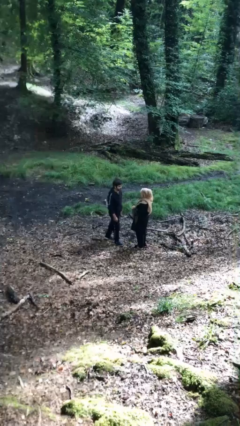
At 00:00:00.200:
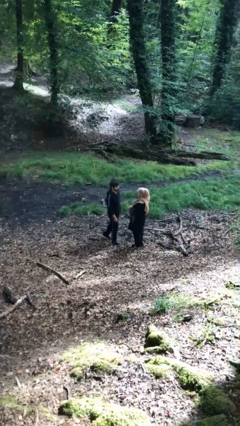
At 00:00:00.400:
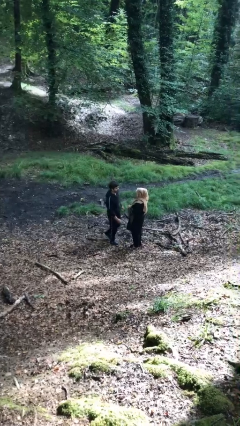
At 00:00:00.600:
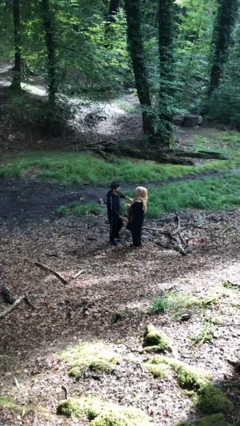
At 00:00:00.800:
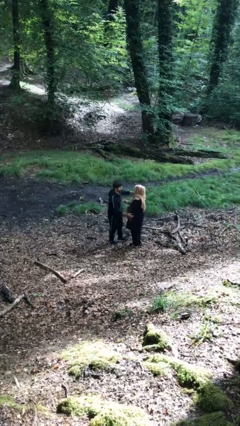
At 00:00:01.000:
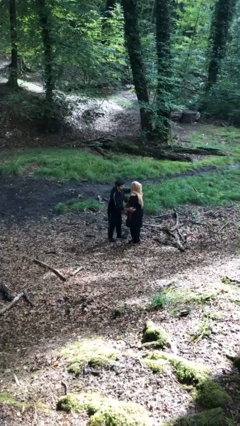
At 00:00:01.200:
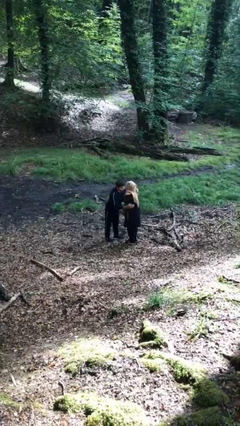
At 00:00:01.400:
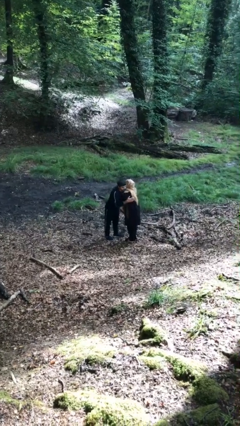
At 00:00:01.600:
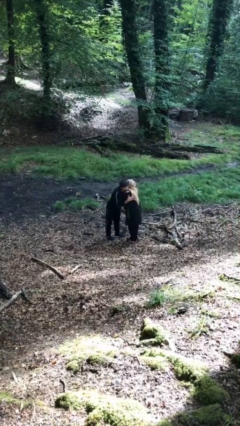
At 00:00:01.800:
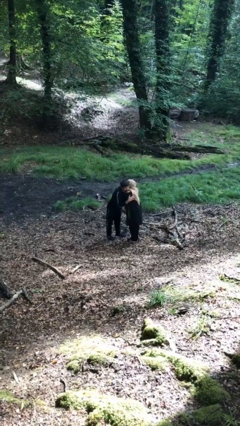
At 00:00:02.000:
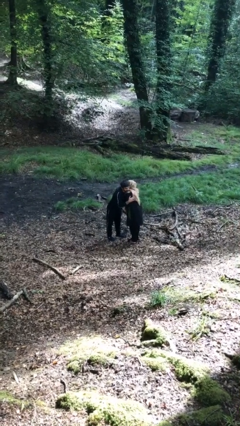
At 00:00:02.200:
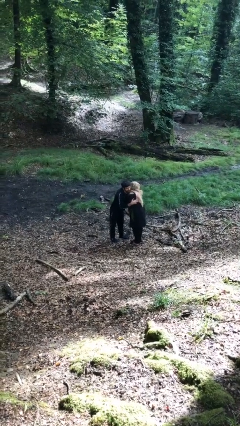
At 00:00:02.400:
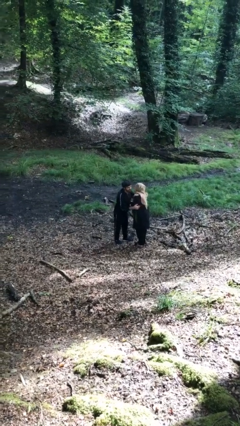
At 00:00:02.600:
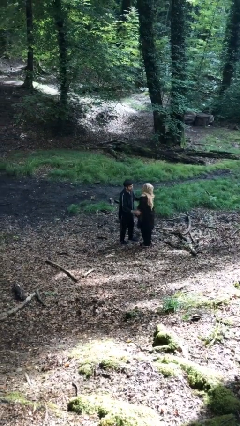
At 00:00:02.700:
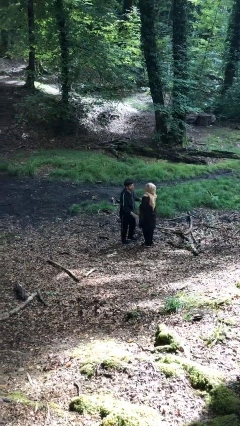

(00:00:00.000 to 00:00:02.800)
person embraces person

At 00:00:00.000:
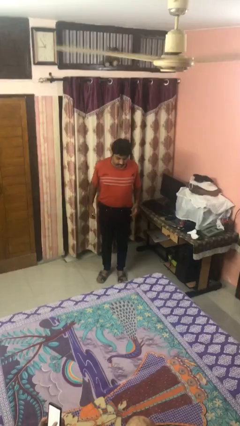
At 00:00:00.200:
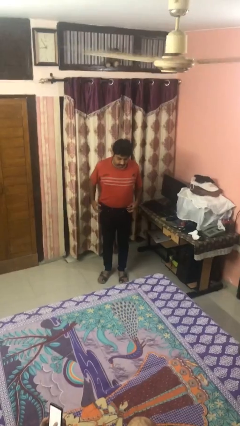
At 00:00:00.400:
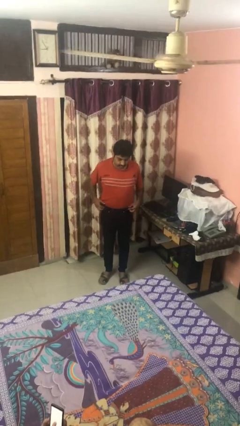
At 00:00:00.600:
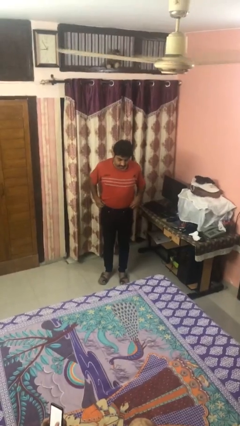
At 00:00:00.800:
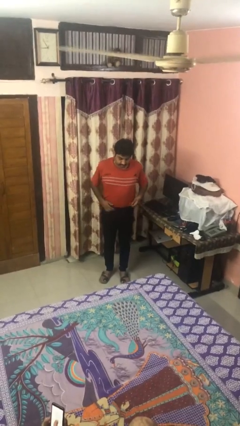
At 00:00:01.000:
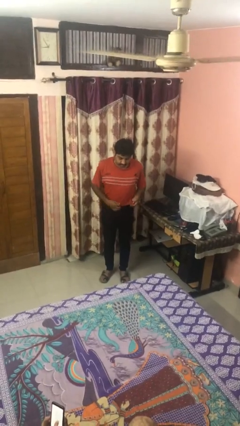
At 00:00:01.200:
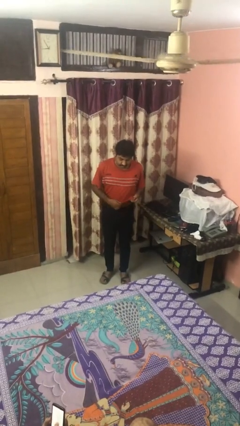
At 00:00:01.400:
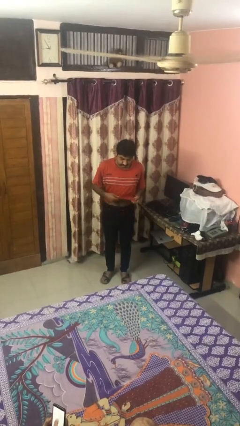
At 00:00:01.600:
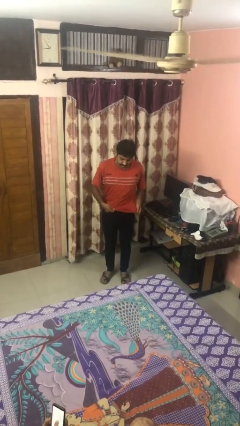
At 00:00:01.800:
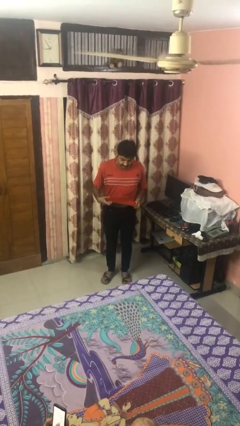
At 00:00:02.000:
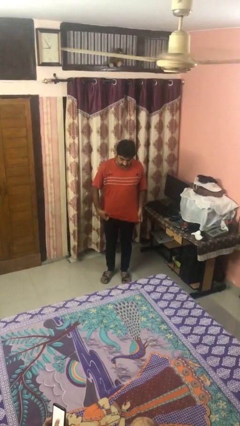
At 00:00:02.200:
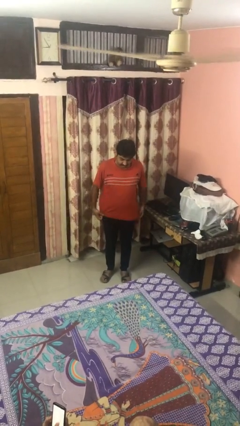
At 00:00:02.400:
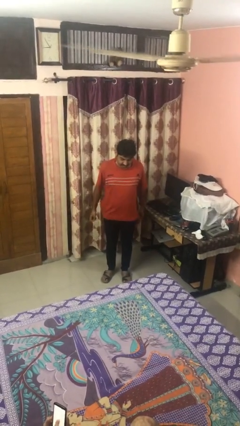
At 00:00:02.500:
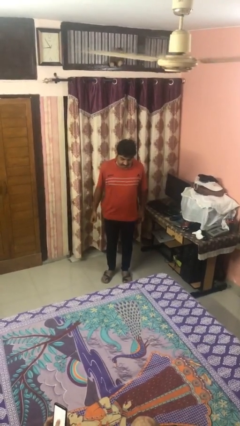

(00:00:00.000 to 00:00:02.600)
person untucks shirt

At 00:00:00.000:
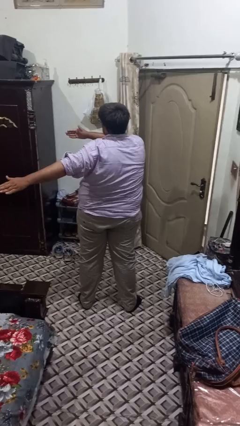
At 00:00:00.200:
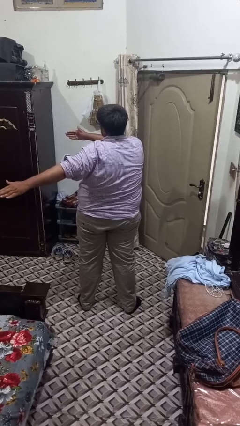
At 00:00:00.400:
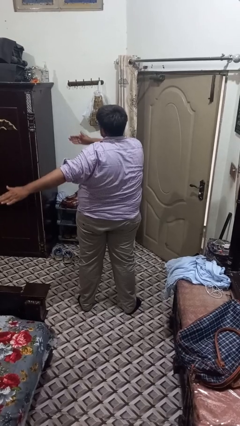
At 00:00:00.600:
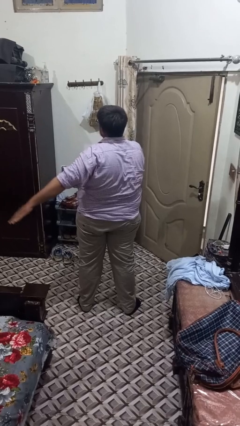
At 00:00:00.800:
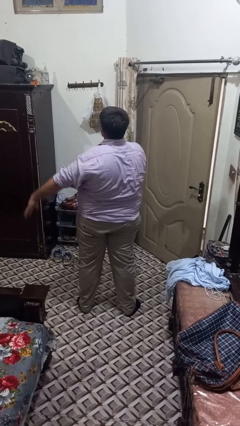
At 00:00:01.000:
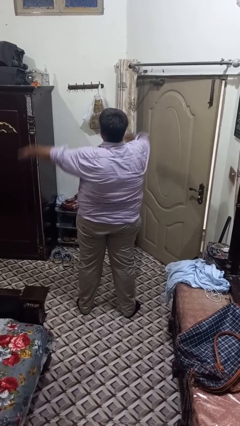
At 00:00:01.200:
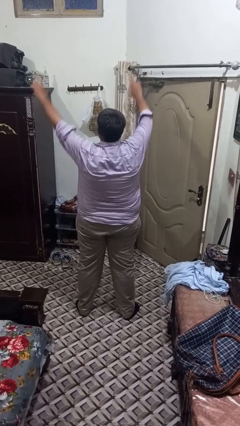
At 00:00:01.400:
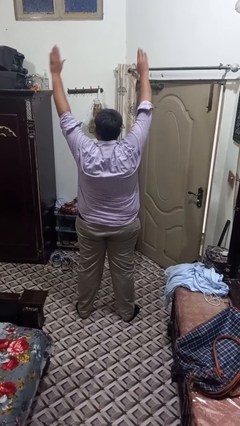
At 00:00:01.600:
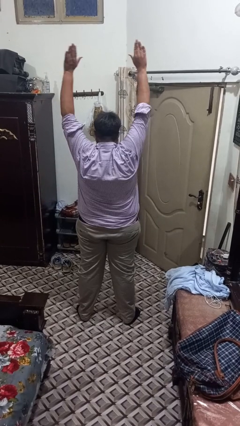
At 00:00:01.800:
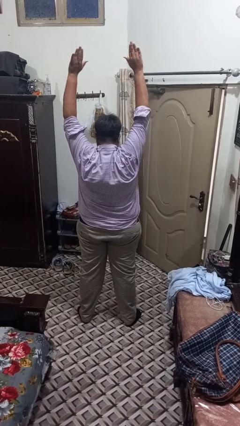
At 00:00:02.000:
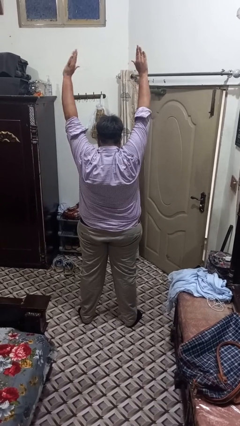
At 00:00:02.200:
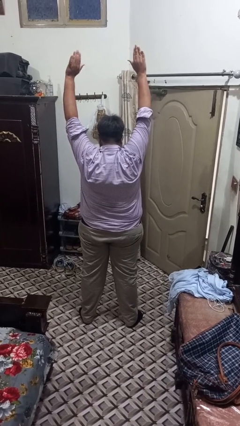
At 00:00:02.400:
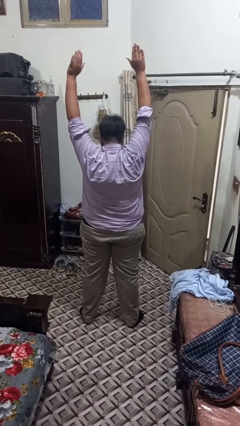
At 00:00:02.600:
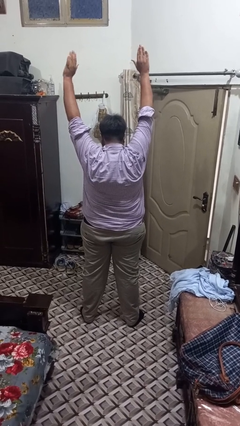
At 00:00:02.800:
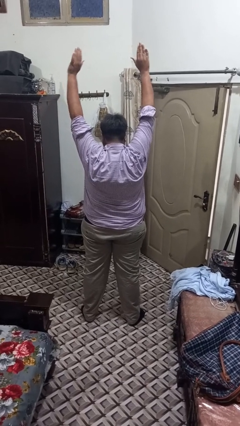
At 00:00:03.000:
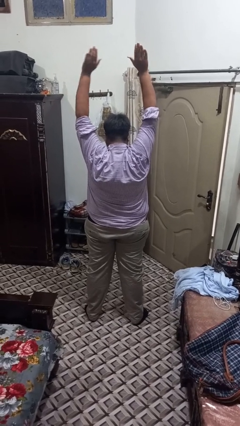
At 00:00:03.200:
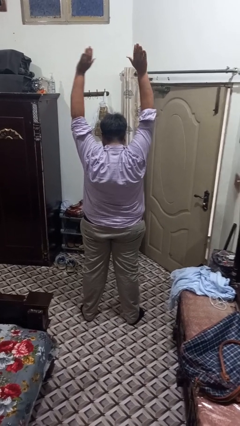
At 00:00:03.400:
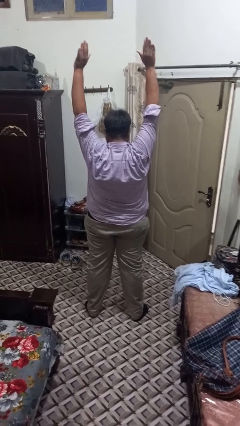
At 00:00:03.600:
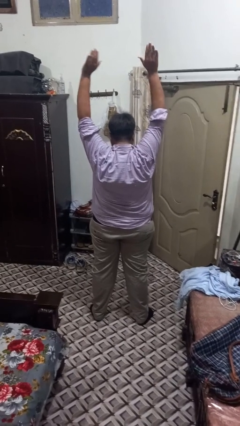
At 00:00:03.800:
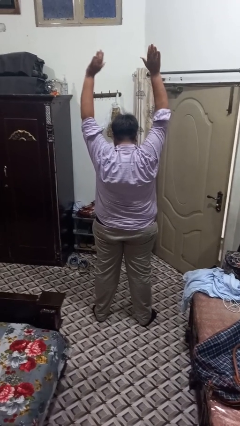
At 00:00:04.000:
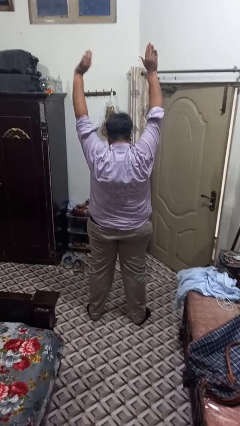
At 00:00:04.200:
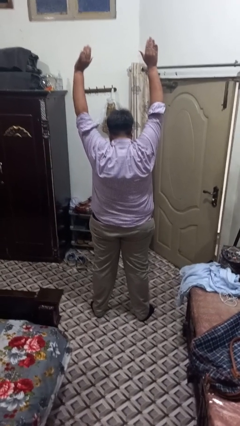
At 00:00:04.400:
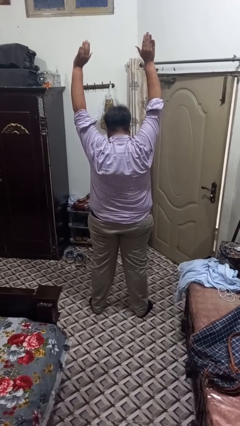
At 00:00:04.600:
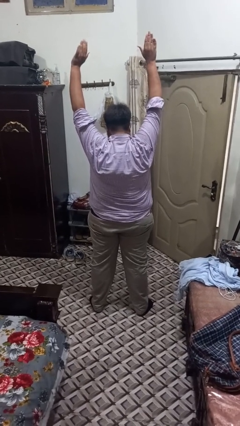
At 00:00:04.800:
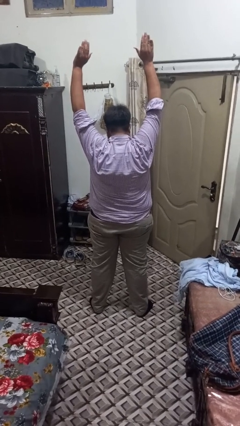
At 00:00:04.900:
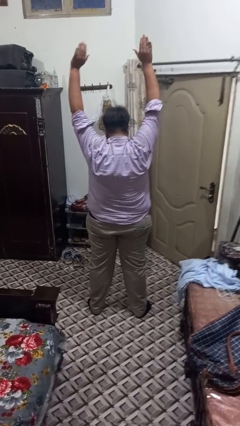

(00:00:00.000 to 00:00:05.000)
person stretches arms over head

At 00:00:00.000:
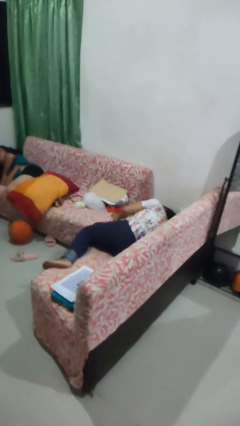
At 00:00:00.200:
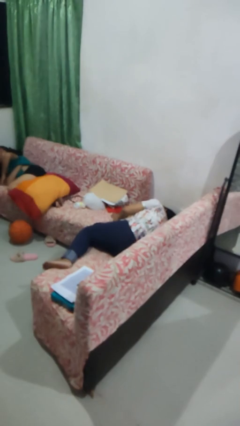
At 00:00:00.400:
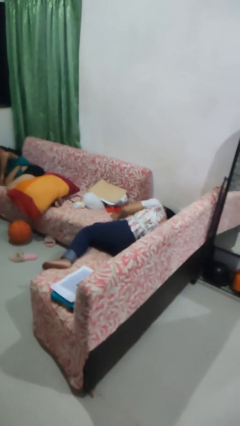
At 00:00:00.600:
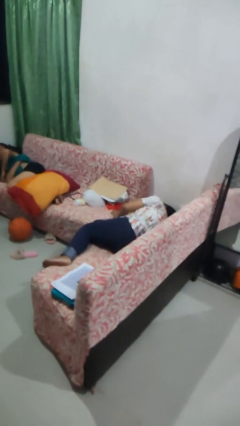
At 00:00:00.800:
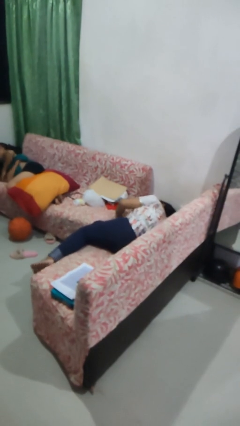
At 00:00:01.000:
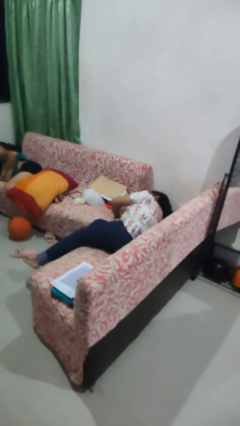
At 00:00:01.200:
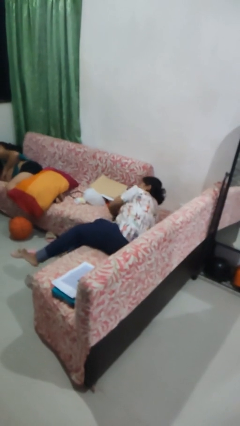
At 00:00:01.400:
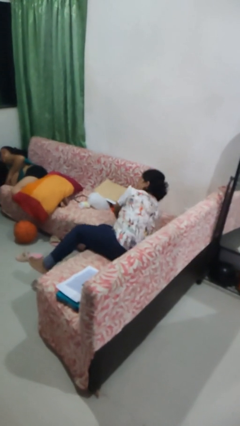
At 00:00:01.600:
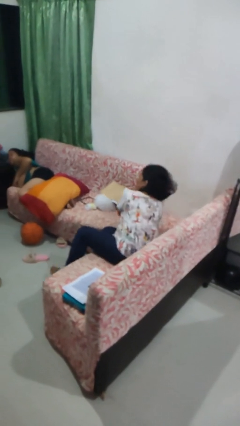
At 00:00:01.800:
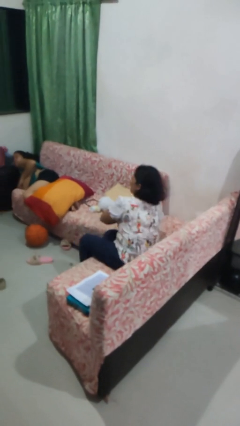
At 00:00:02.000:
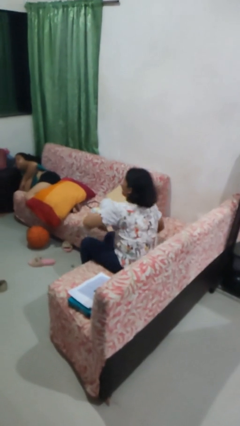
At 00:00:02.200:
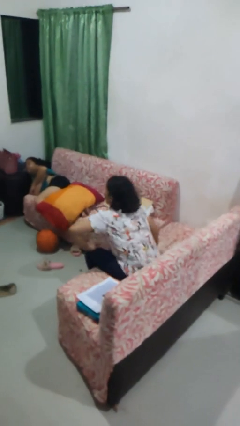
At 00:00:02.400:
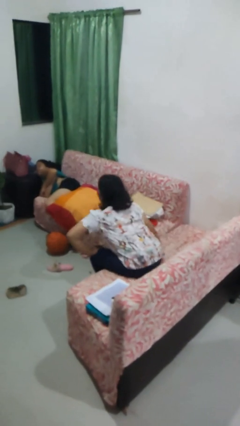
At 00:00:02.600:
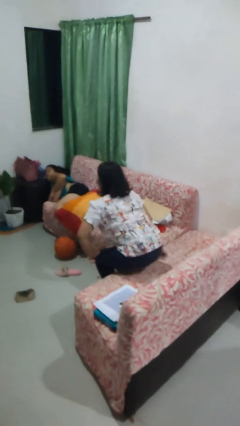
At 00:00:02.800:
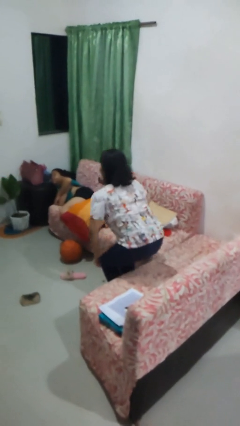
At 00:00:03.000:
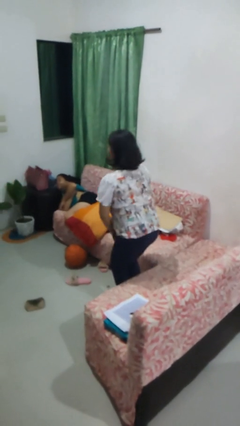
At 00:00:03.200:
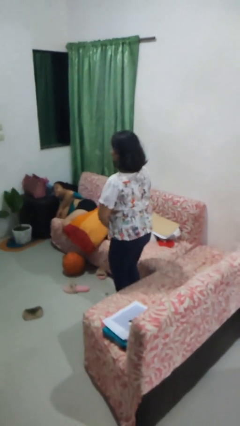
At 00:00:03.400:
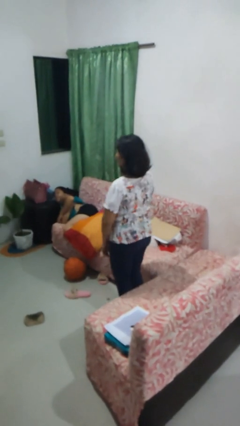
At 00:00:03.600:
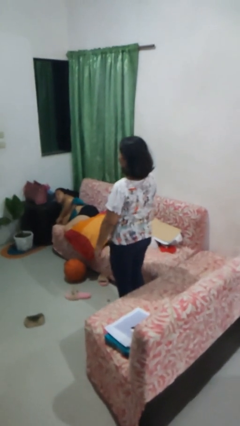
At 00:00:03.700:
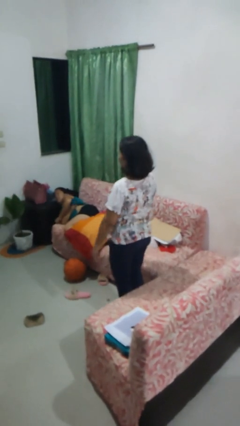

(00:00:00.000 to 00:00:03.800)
person stands up

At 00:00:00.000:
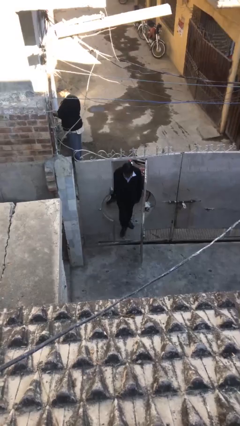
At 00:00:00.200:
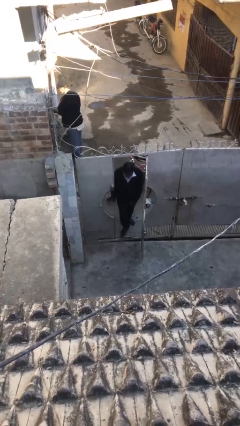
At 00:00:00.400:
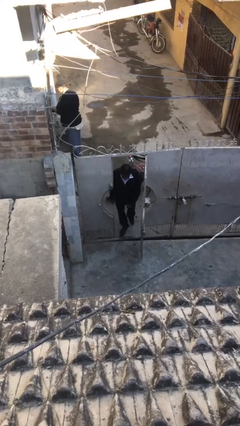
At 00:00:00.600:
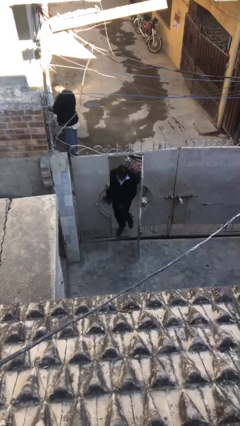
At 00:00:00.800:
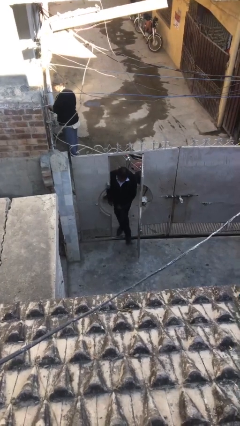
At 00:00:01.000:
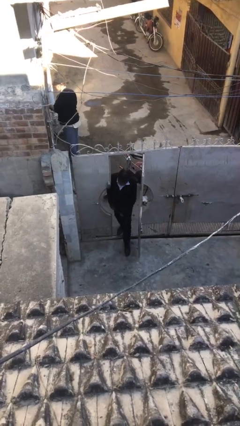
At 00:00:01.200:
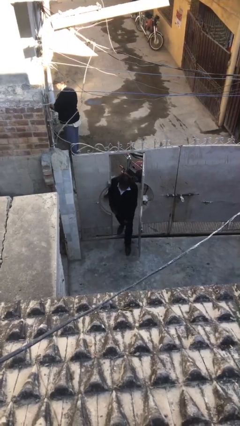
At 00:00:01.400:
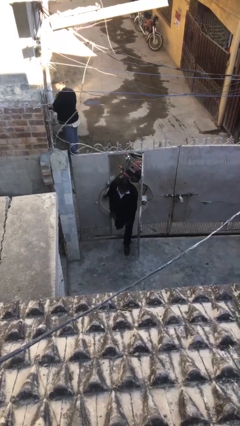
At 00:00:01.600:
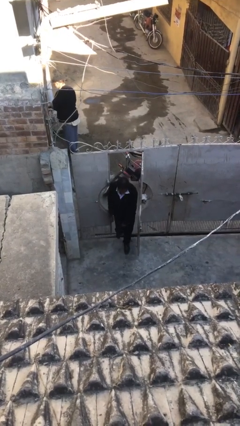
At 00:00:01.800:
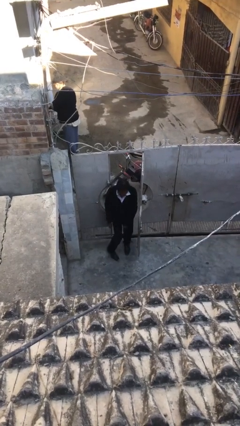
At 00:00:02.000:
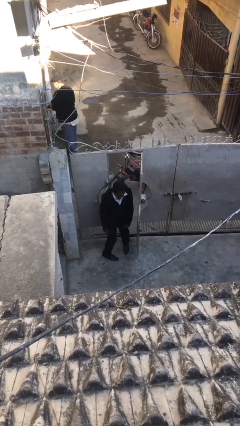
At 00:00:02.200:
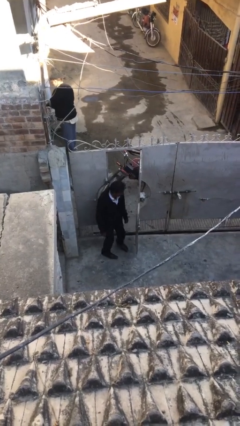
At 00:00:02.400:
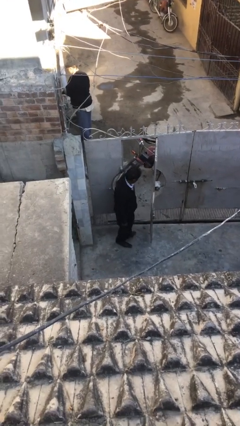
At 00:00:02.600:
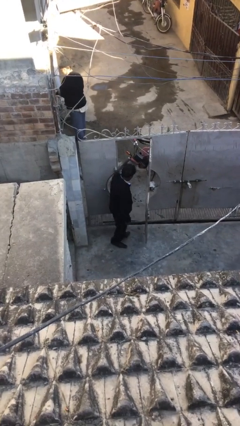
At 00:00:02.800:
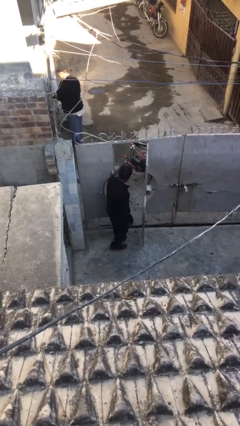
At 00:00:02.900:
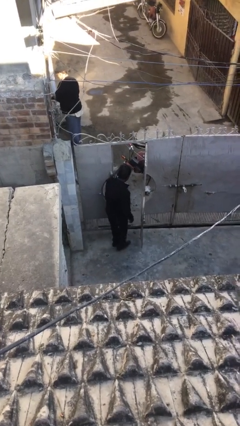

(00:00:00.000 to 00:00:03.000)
person enters scene through structure
